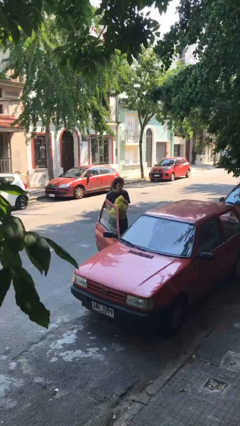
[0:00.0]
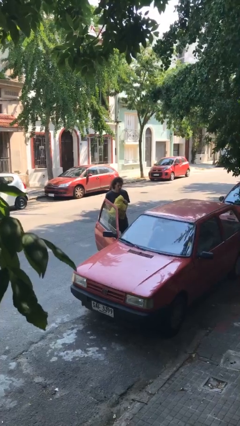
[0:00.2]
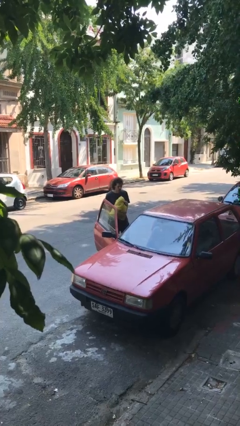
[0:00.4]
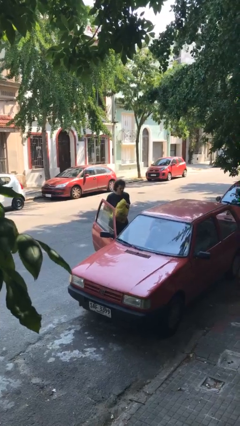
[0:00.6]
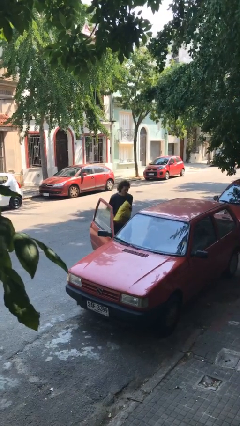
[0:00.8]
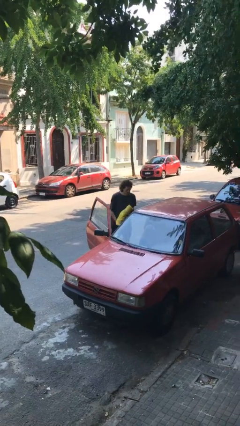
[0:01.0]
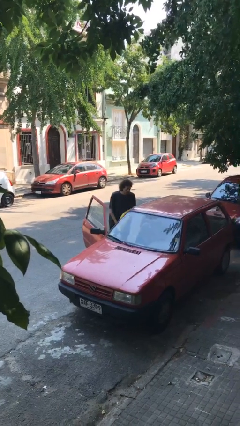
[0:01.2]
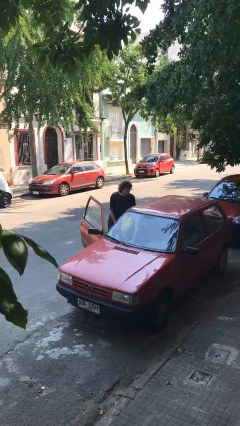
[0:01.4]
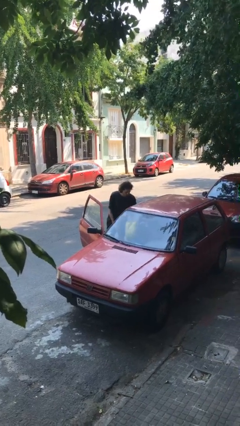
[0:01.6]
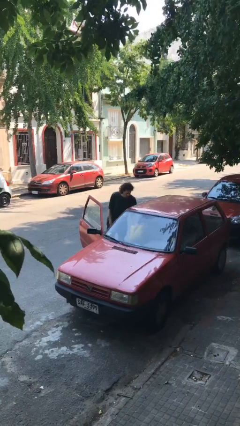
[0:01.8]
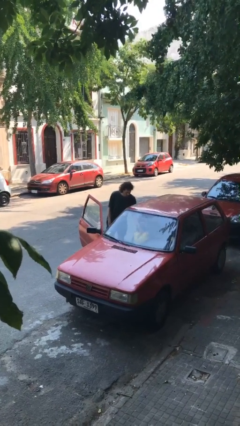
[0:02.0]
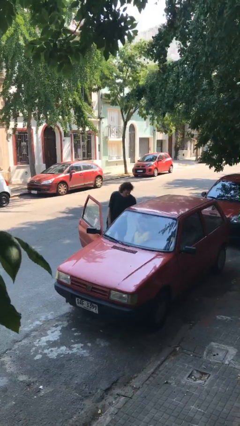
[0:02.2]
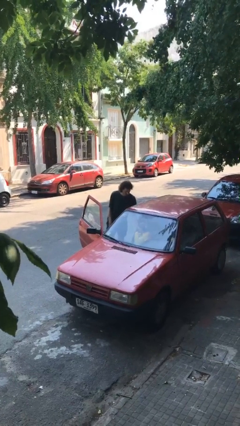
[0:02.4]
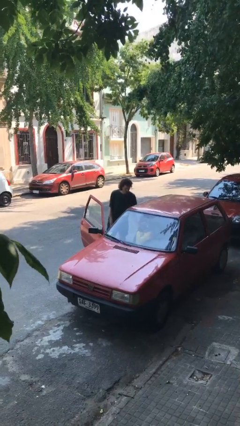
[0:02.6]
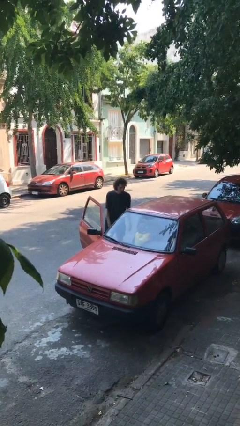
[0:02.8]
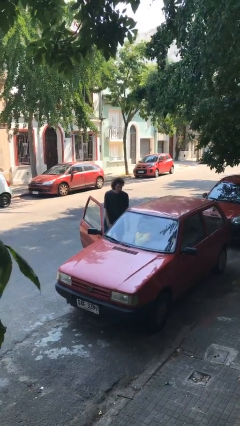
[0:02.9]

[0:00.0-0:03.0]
person loads car

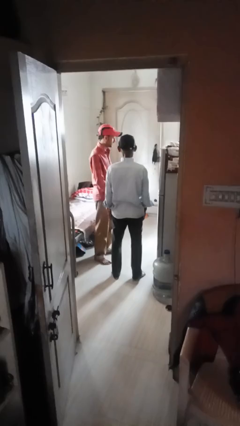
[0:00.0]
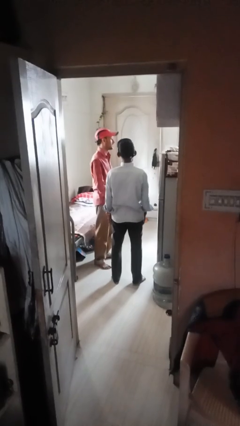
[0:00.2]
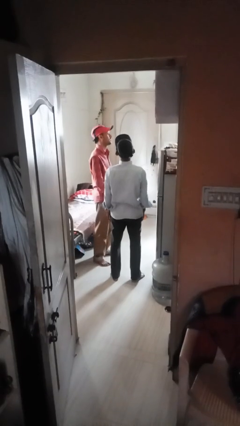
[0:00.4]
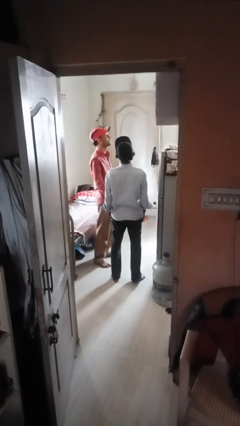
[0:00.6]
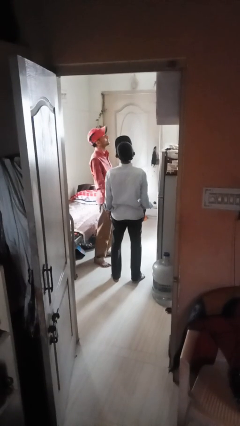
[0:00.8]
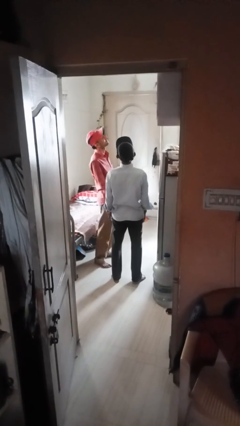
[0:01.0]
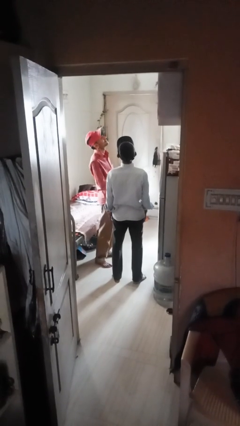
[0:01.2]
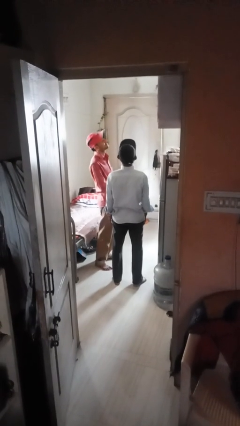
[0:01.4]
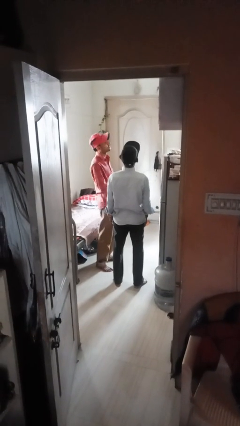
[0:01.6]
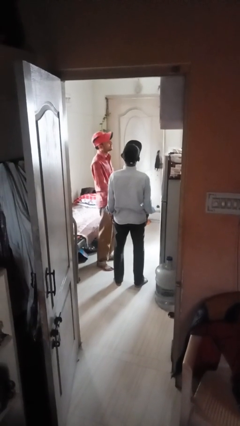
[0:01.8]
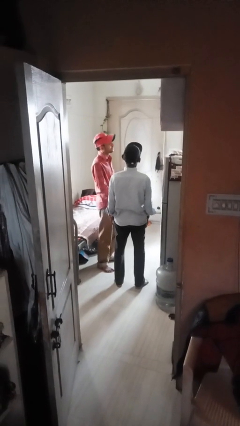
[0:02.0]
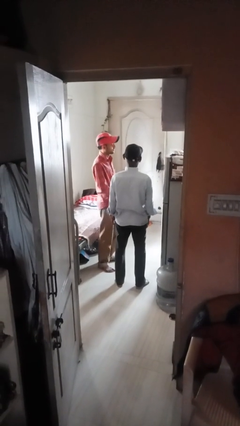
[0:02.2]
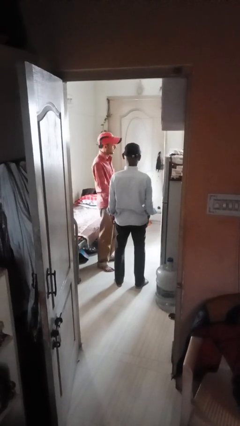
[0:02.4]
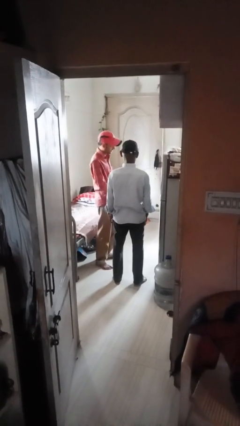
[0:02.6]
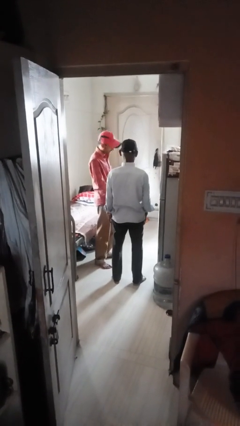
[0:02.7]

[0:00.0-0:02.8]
person laughs with person

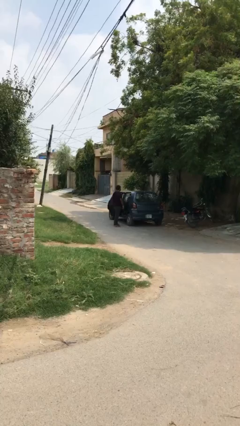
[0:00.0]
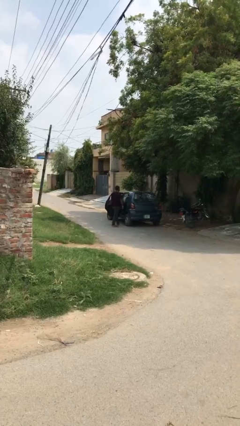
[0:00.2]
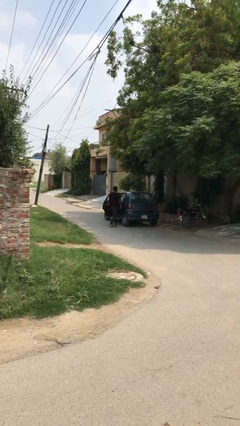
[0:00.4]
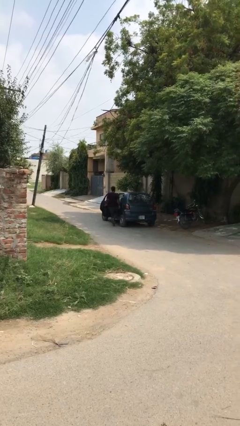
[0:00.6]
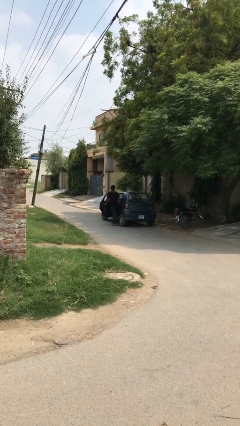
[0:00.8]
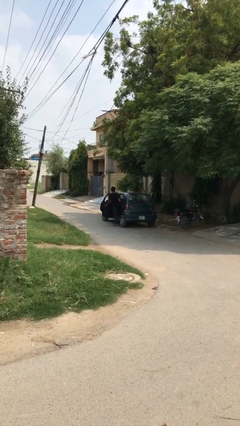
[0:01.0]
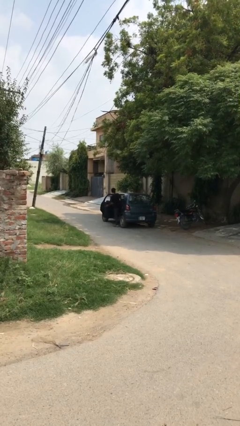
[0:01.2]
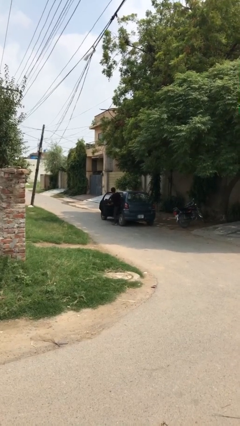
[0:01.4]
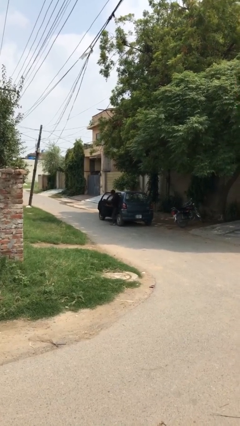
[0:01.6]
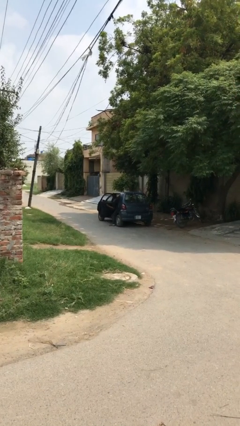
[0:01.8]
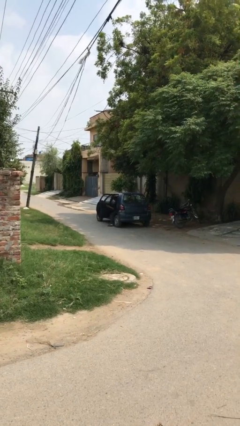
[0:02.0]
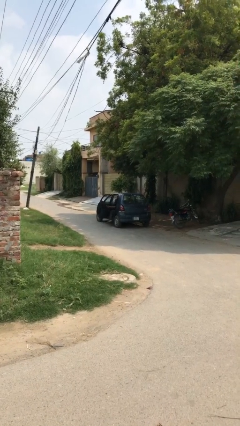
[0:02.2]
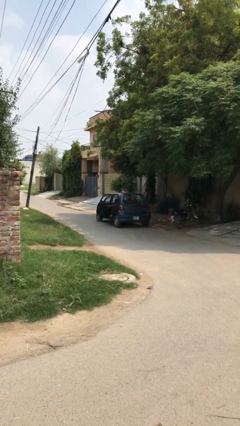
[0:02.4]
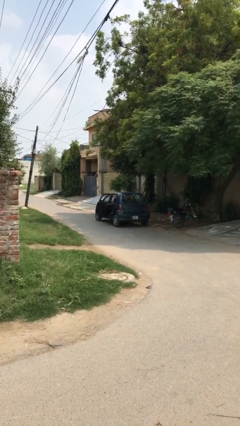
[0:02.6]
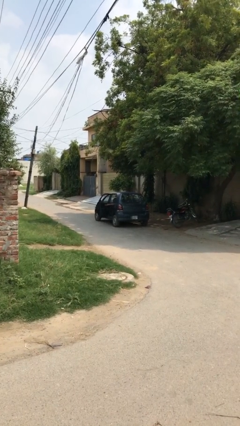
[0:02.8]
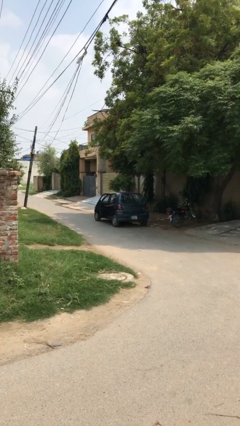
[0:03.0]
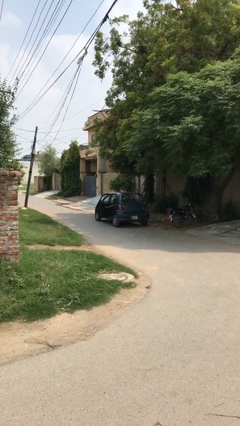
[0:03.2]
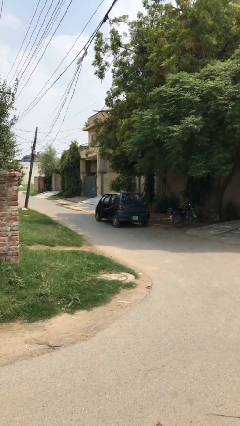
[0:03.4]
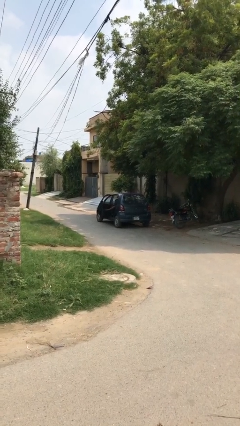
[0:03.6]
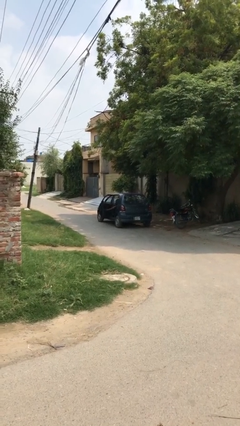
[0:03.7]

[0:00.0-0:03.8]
person enters car

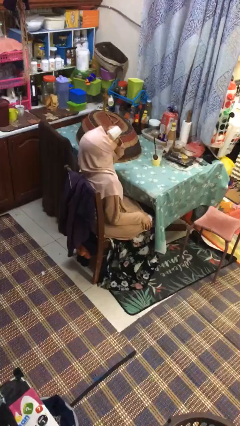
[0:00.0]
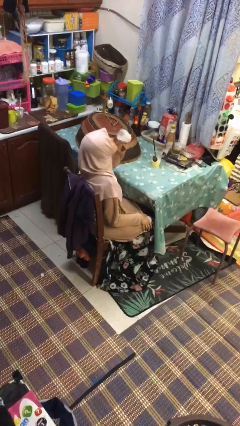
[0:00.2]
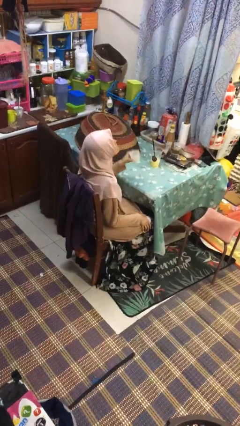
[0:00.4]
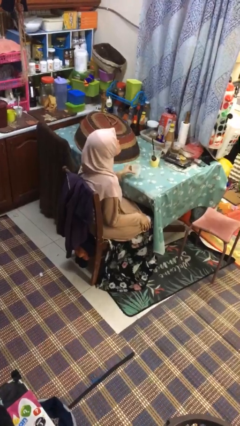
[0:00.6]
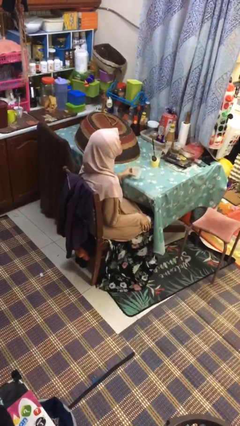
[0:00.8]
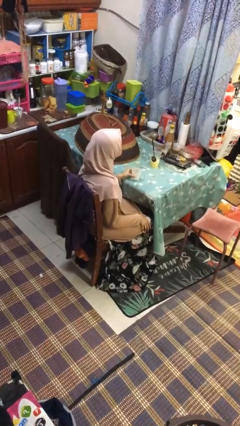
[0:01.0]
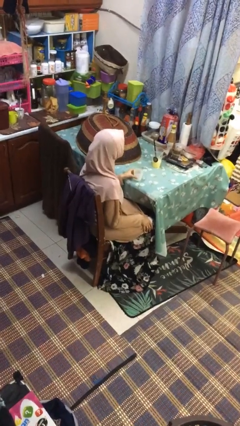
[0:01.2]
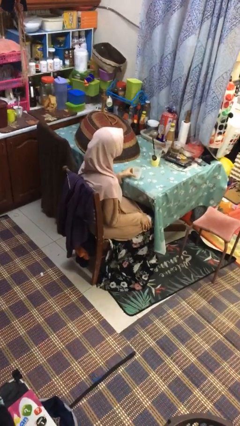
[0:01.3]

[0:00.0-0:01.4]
person puts down object on table

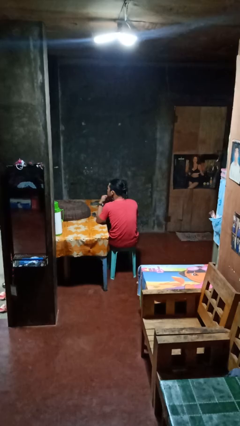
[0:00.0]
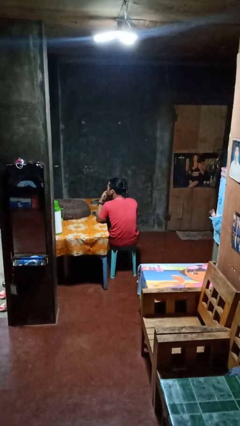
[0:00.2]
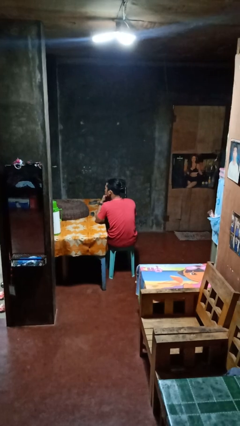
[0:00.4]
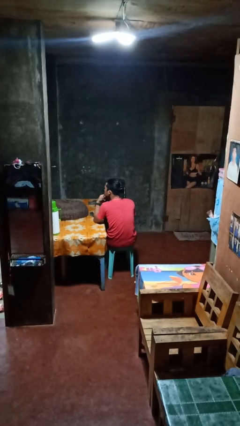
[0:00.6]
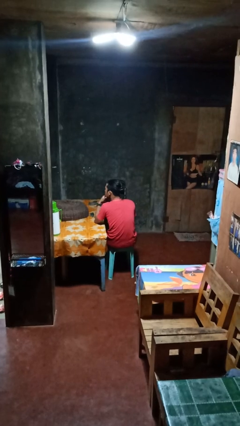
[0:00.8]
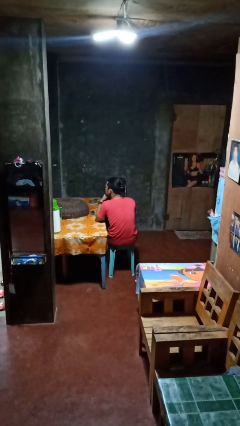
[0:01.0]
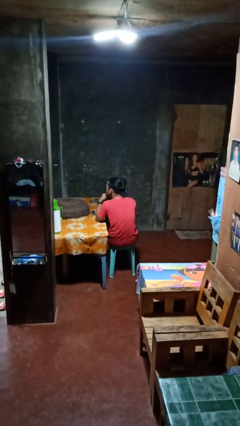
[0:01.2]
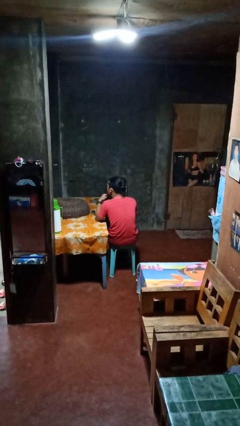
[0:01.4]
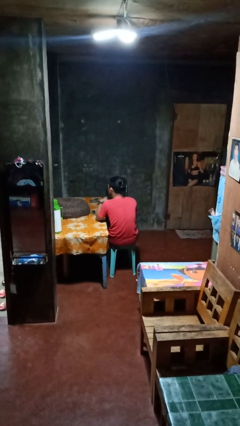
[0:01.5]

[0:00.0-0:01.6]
person strokes chin

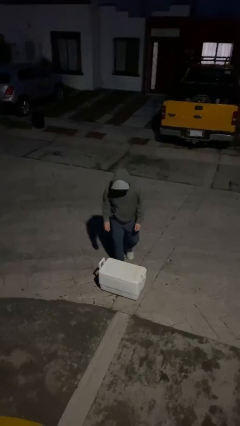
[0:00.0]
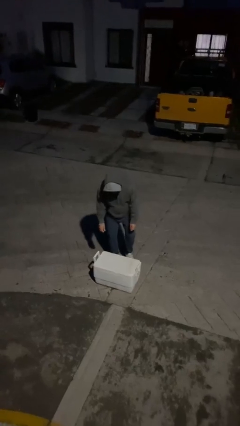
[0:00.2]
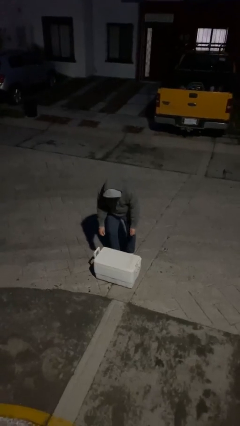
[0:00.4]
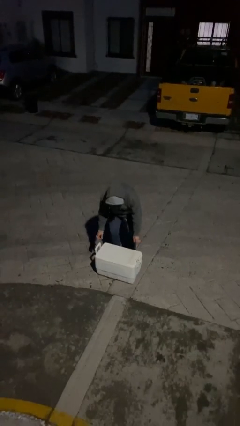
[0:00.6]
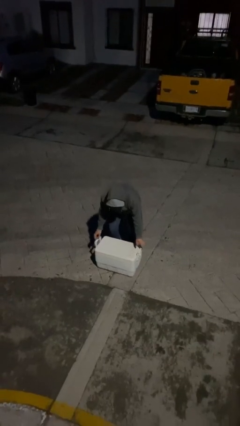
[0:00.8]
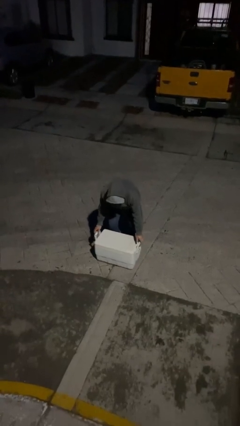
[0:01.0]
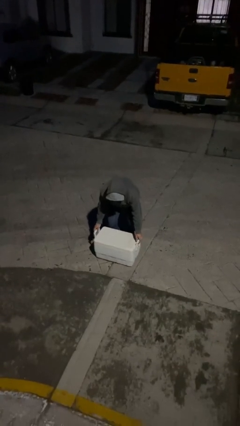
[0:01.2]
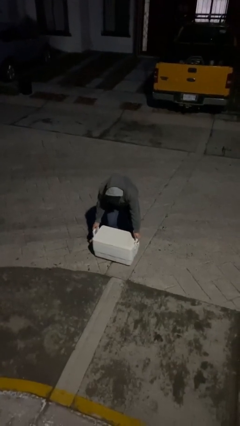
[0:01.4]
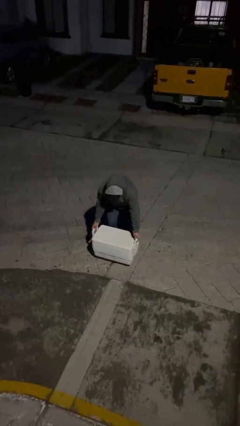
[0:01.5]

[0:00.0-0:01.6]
person picks up object from floor

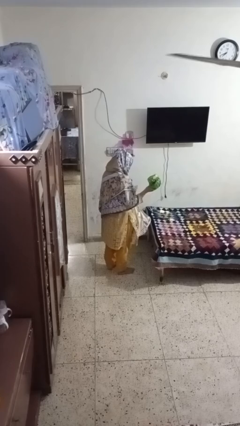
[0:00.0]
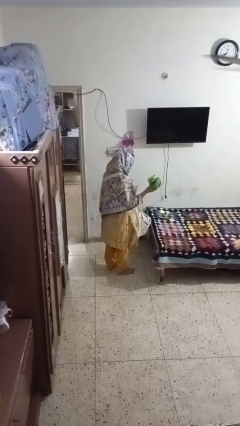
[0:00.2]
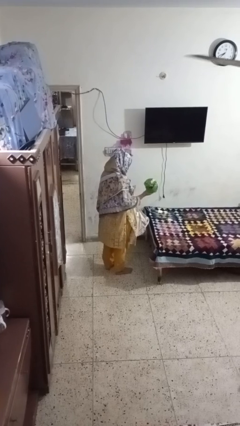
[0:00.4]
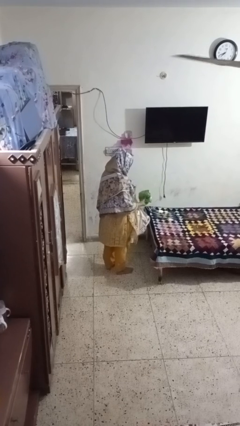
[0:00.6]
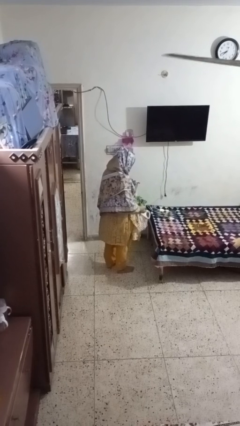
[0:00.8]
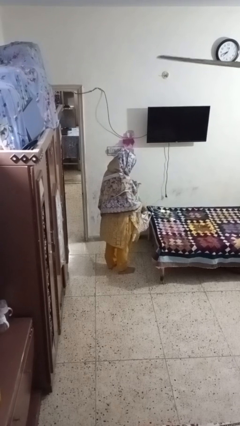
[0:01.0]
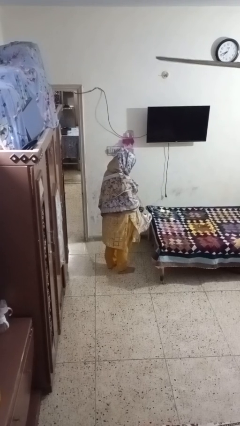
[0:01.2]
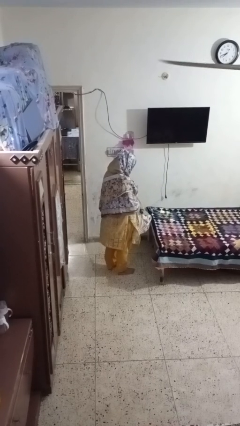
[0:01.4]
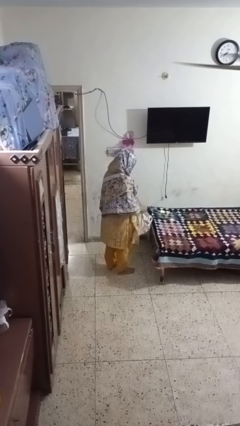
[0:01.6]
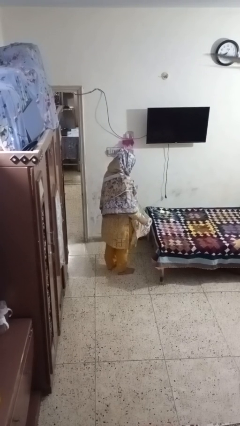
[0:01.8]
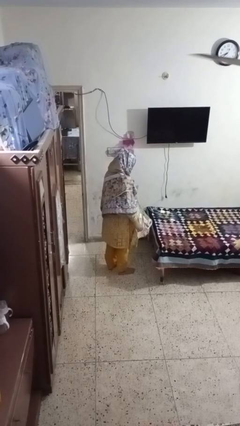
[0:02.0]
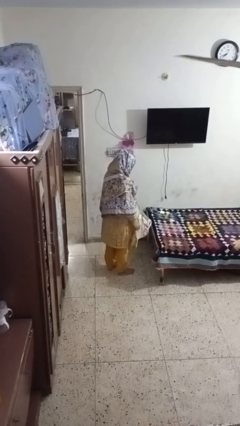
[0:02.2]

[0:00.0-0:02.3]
person puts object into bag

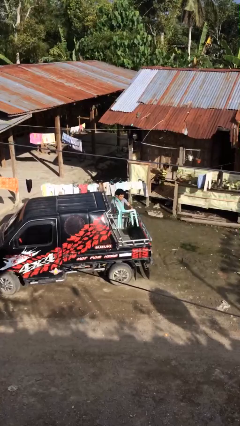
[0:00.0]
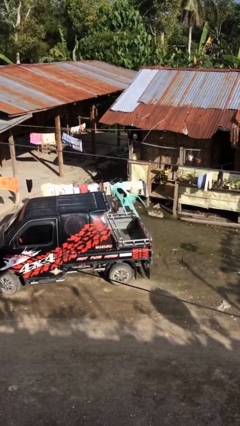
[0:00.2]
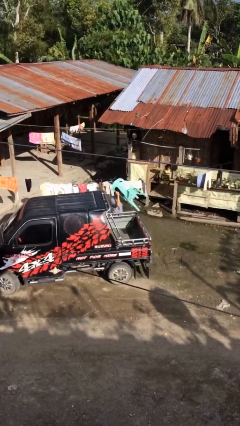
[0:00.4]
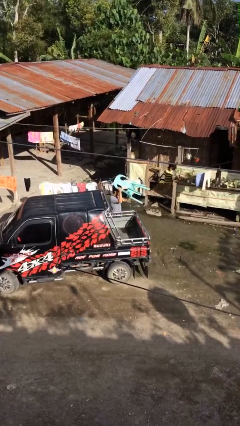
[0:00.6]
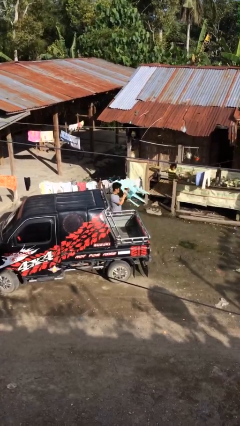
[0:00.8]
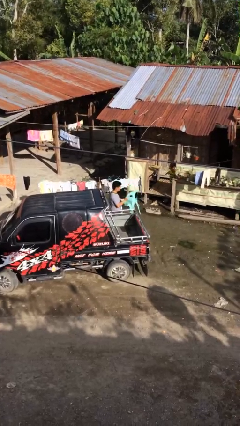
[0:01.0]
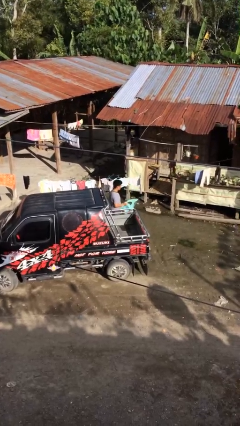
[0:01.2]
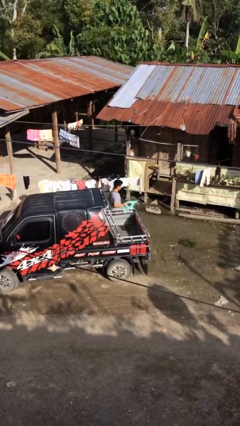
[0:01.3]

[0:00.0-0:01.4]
person unloads car
